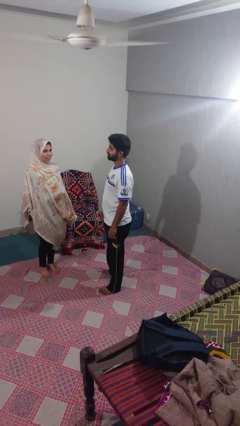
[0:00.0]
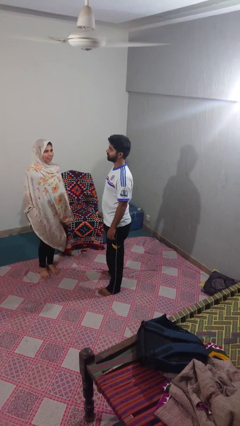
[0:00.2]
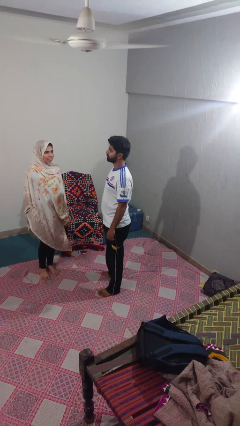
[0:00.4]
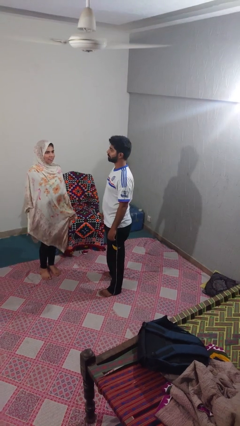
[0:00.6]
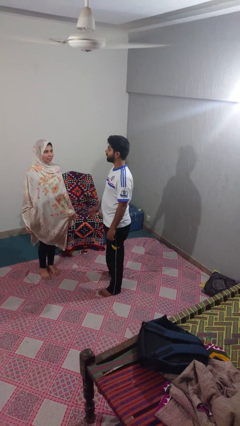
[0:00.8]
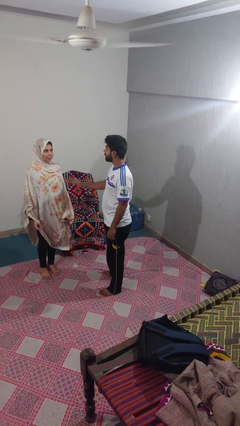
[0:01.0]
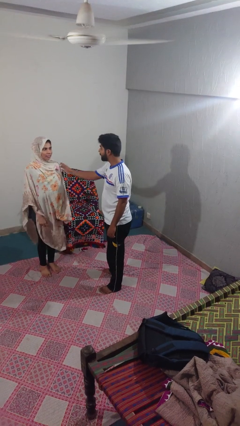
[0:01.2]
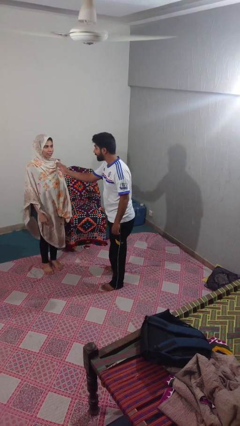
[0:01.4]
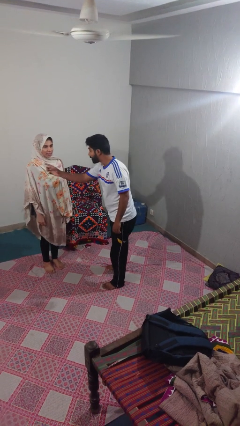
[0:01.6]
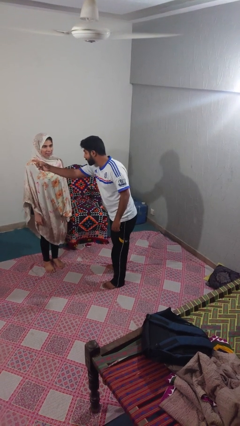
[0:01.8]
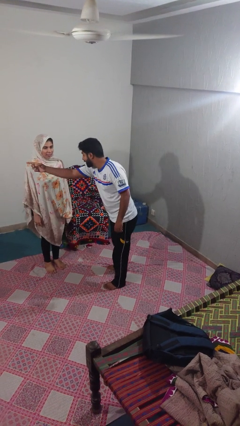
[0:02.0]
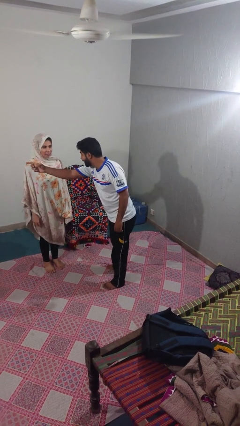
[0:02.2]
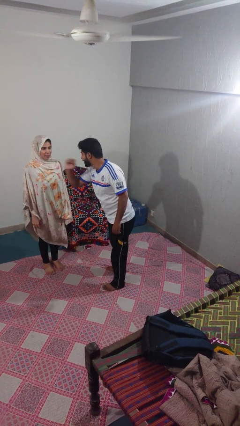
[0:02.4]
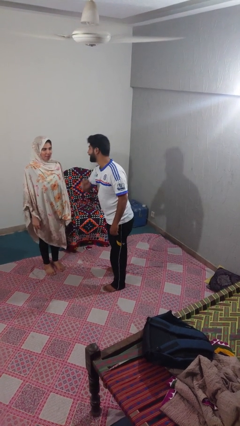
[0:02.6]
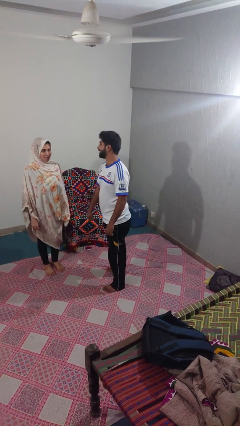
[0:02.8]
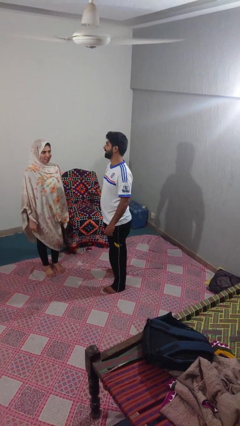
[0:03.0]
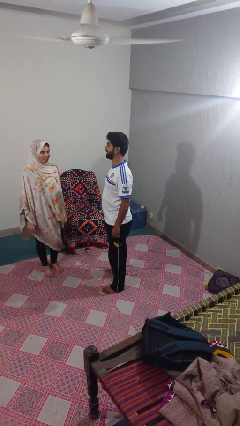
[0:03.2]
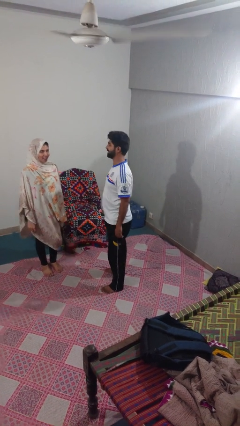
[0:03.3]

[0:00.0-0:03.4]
person shoves person

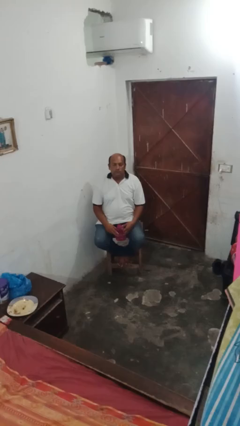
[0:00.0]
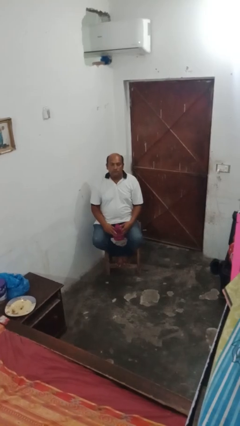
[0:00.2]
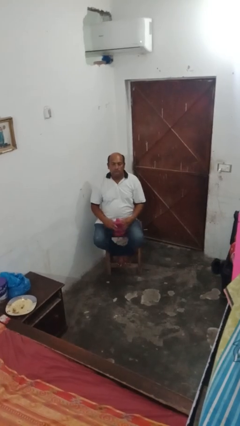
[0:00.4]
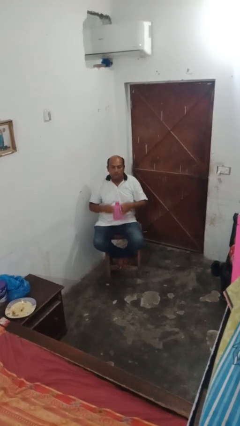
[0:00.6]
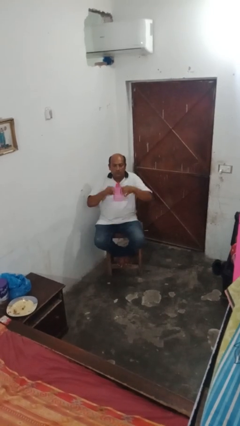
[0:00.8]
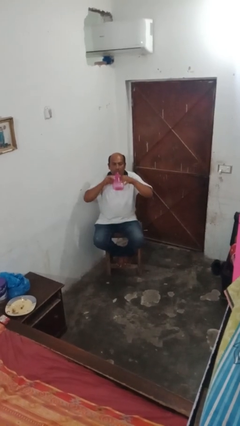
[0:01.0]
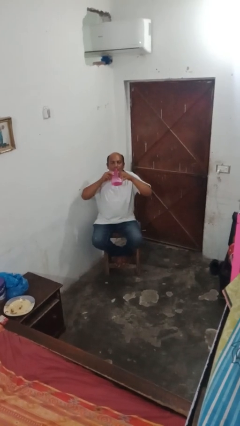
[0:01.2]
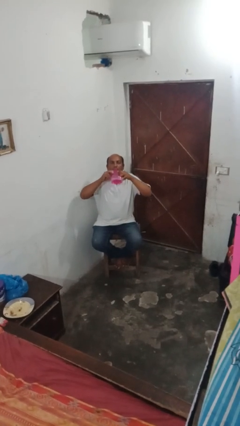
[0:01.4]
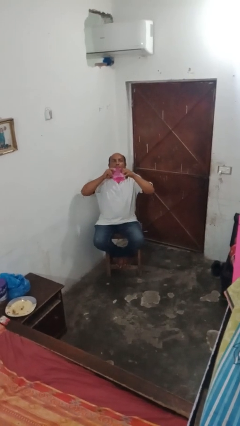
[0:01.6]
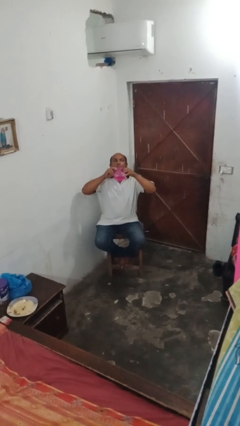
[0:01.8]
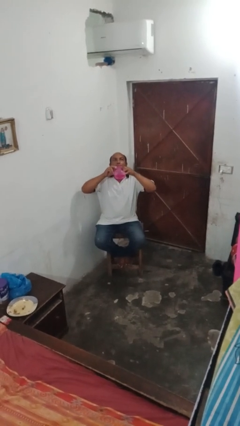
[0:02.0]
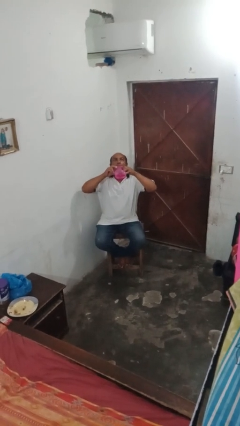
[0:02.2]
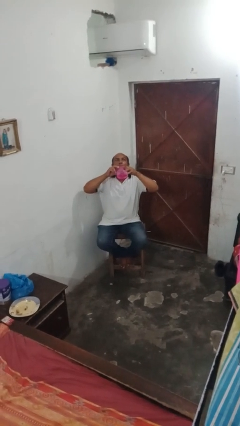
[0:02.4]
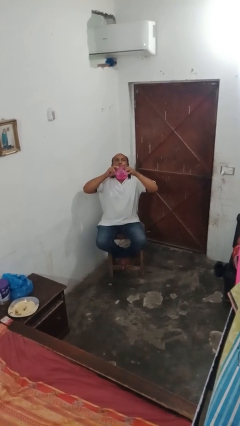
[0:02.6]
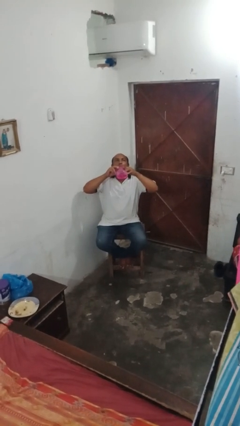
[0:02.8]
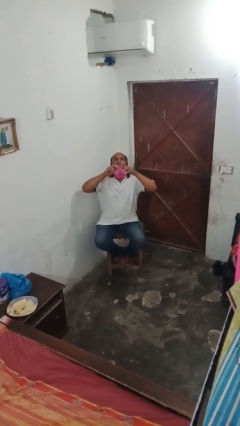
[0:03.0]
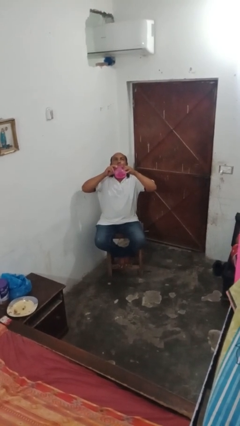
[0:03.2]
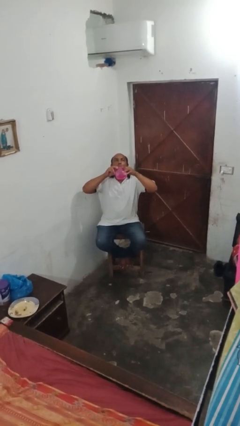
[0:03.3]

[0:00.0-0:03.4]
person drinks from bottle

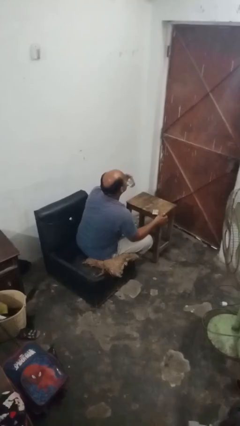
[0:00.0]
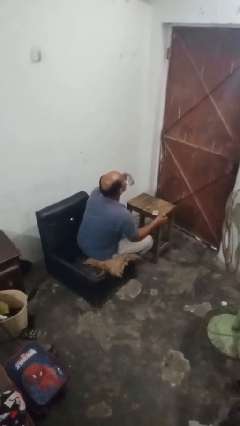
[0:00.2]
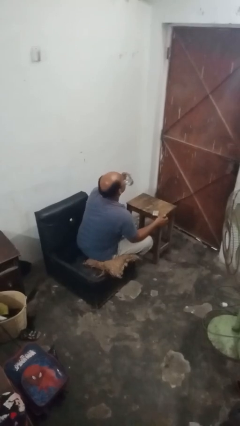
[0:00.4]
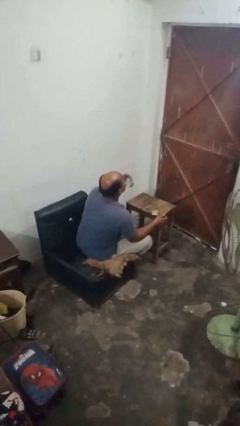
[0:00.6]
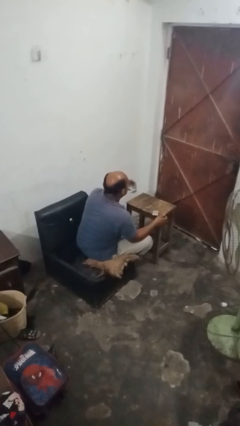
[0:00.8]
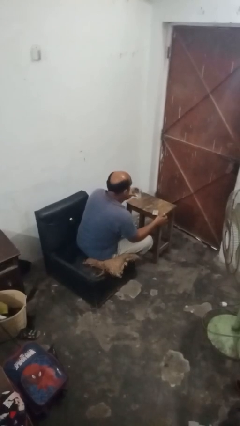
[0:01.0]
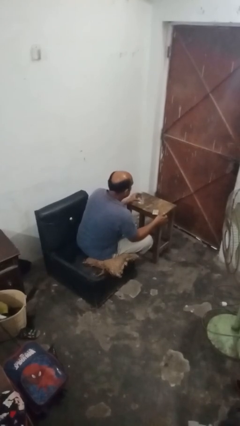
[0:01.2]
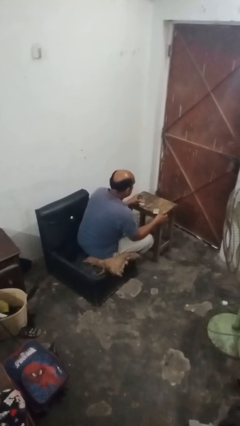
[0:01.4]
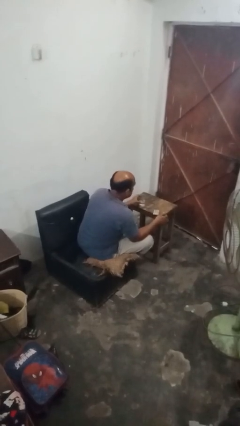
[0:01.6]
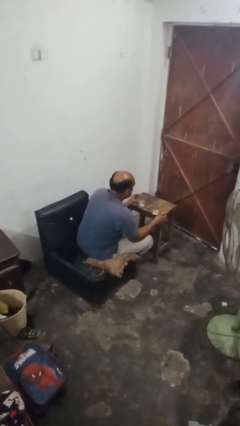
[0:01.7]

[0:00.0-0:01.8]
person drinks from cup

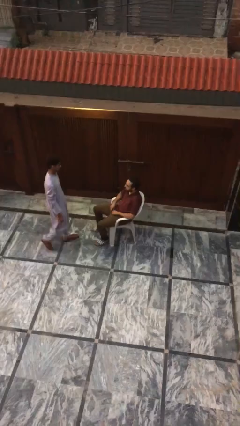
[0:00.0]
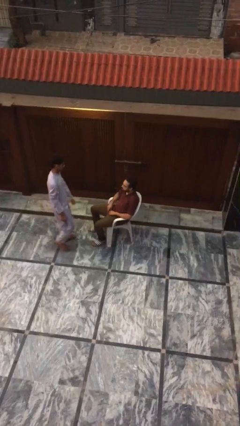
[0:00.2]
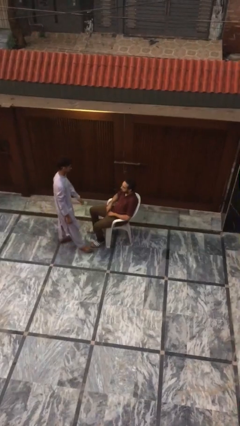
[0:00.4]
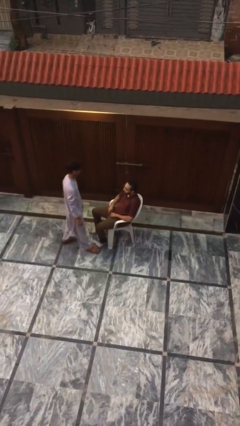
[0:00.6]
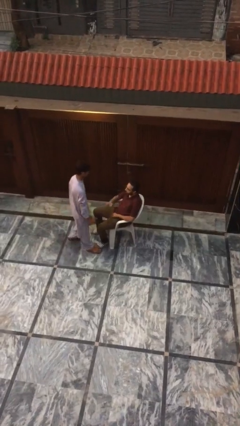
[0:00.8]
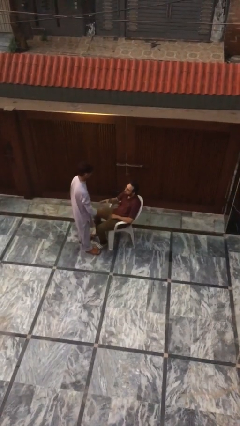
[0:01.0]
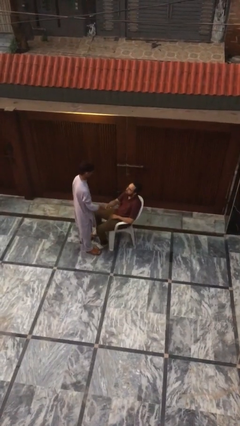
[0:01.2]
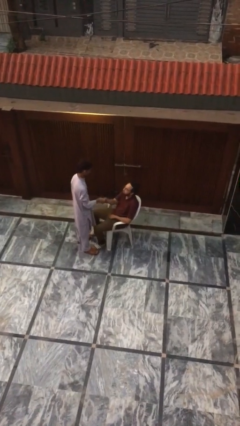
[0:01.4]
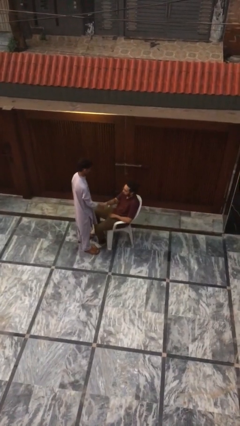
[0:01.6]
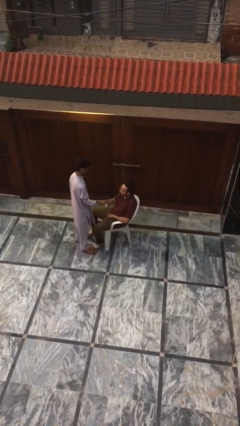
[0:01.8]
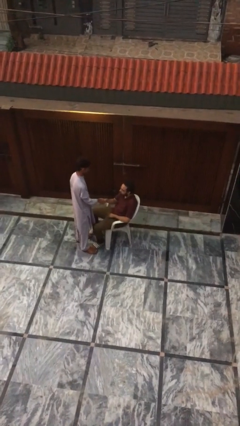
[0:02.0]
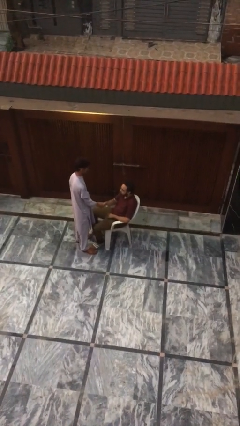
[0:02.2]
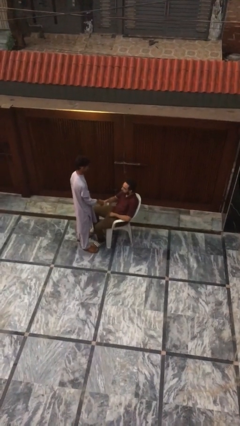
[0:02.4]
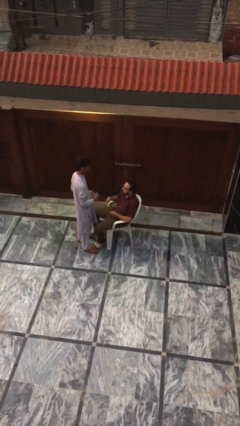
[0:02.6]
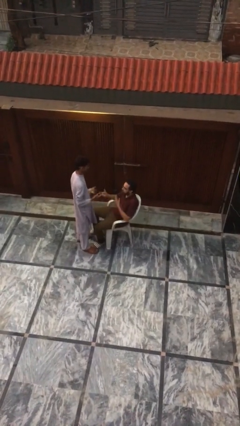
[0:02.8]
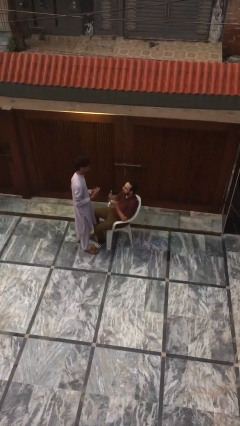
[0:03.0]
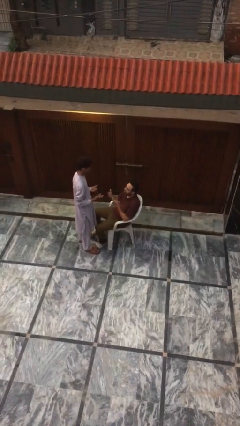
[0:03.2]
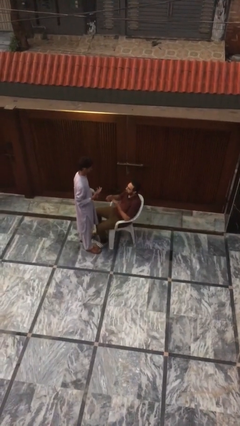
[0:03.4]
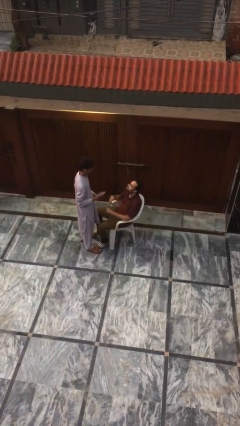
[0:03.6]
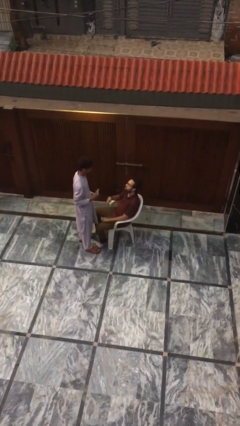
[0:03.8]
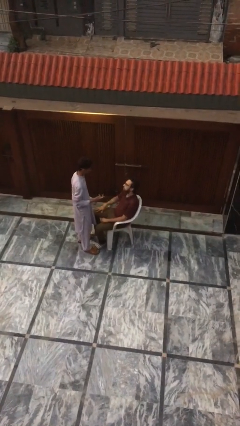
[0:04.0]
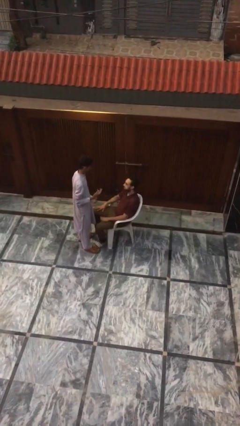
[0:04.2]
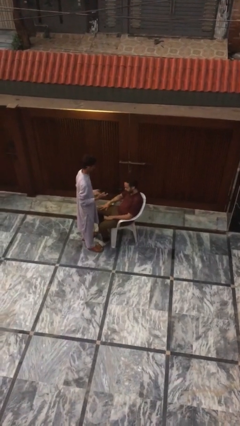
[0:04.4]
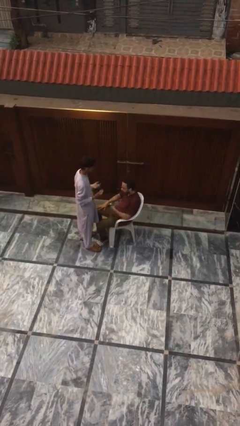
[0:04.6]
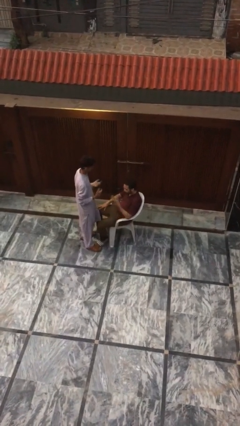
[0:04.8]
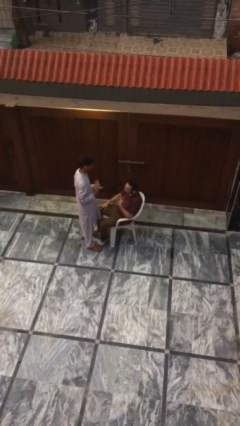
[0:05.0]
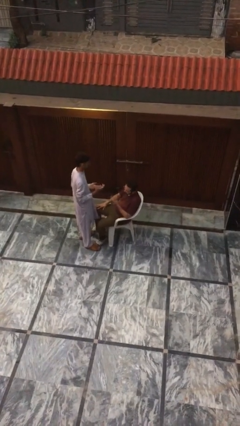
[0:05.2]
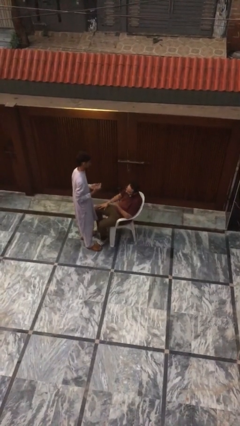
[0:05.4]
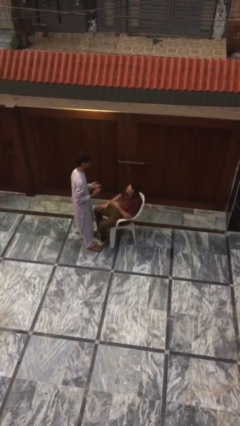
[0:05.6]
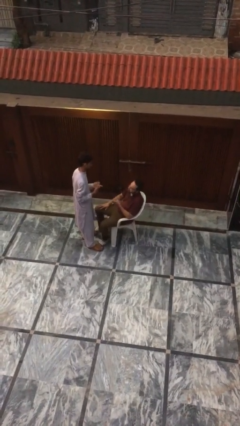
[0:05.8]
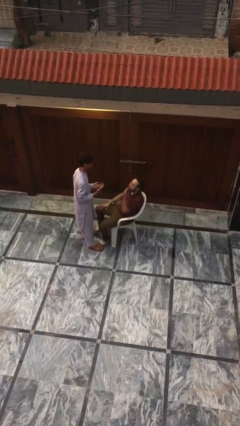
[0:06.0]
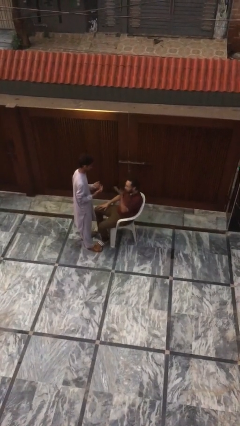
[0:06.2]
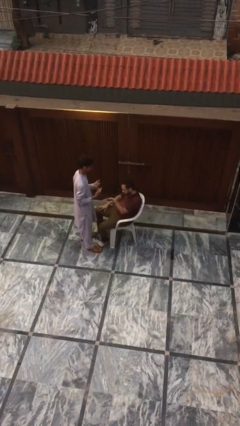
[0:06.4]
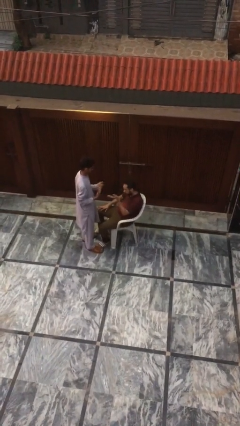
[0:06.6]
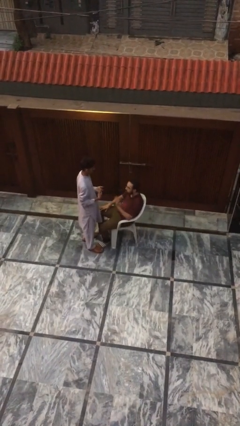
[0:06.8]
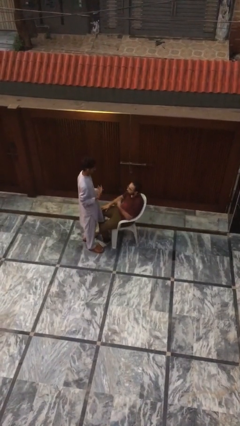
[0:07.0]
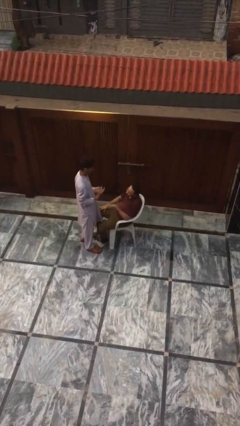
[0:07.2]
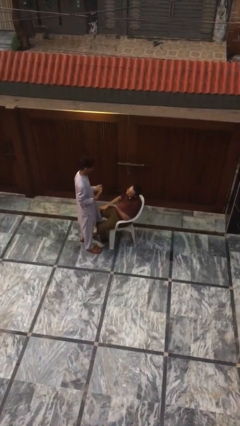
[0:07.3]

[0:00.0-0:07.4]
person shakes hand

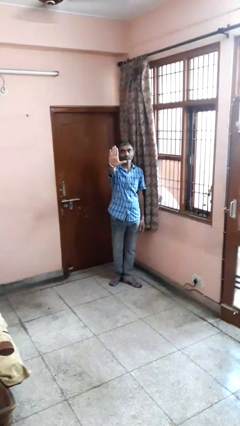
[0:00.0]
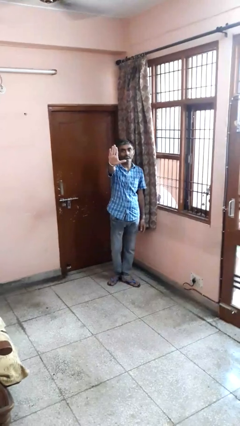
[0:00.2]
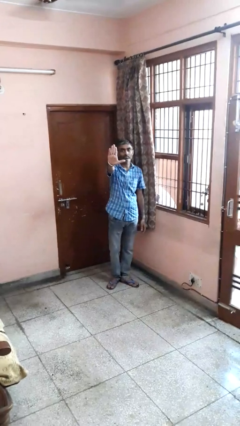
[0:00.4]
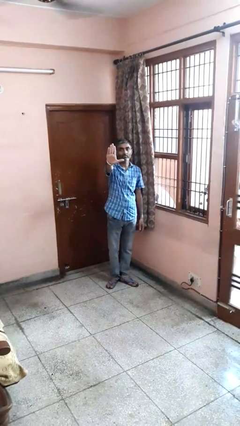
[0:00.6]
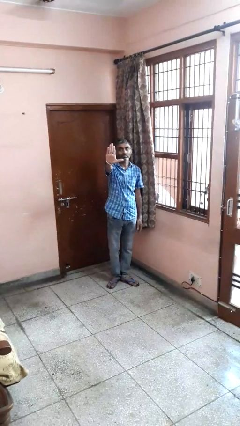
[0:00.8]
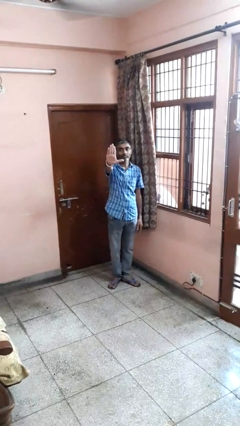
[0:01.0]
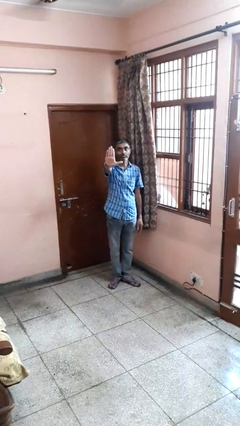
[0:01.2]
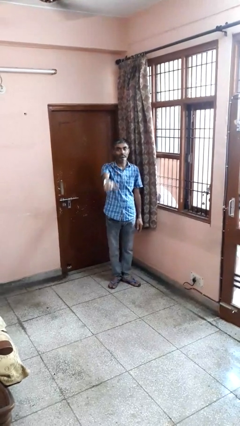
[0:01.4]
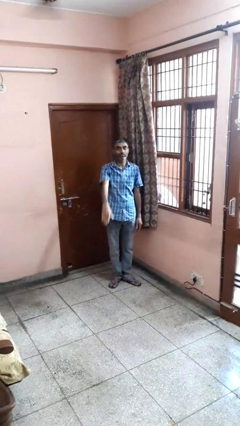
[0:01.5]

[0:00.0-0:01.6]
person gestures stop
